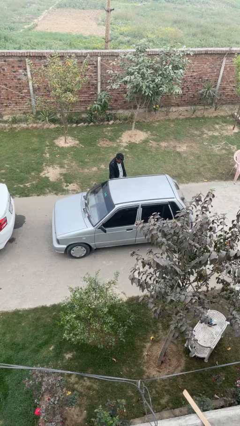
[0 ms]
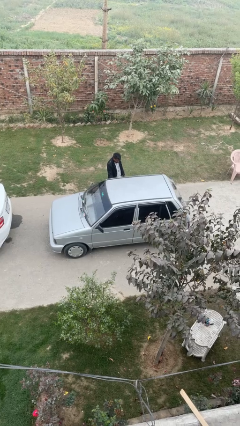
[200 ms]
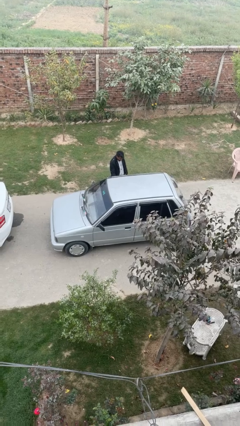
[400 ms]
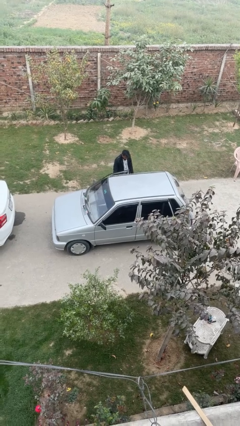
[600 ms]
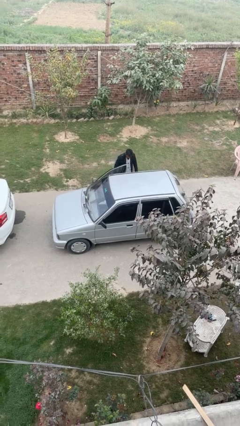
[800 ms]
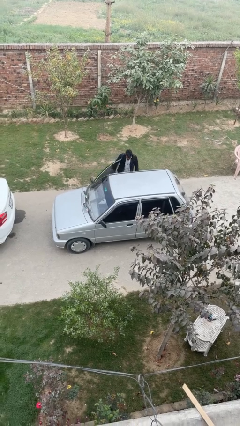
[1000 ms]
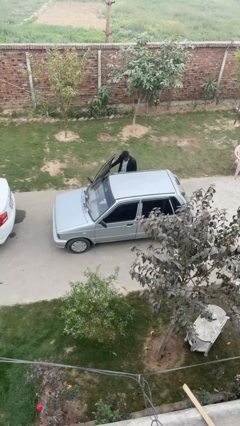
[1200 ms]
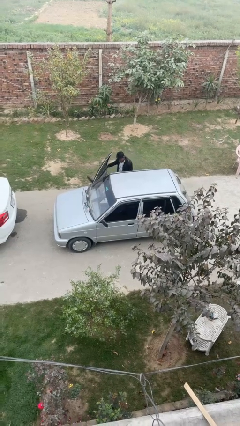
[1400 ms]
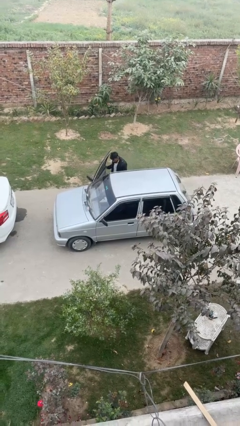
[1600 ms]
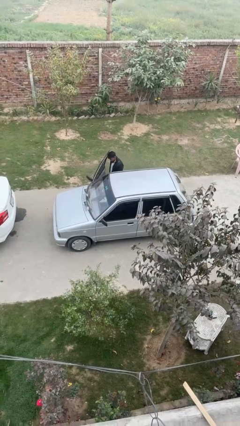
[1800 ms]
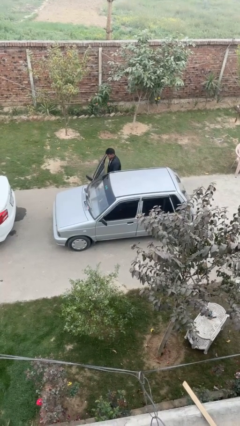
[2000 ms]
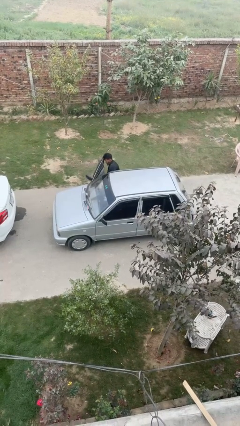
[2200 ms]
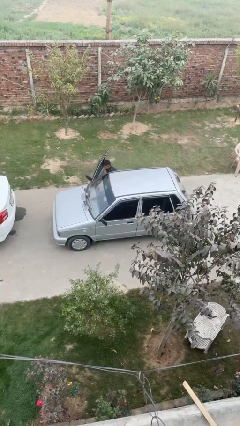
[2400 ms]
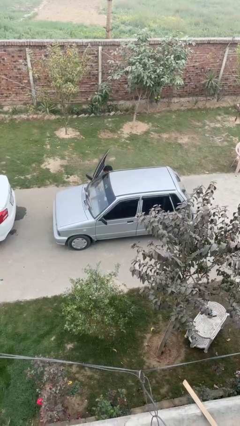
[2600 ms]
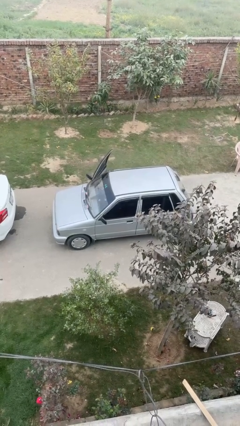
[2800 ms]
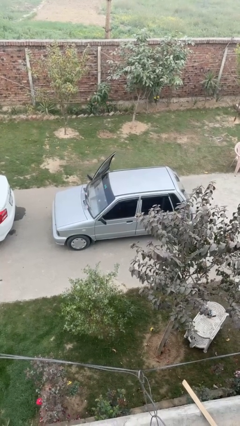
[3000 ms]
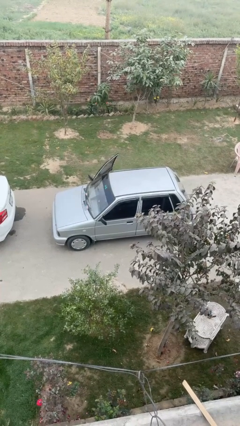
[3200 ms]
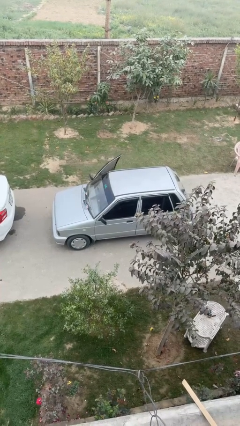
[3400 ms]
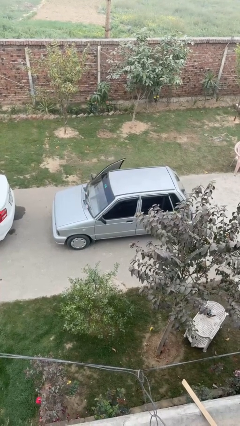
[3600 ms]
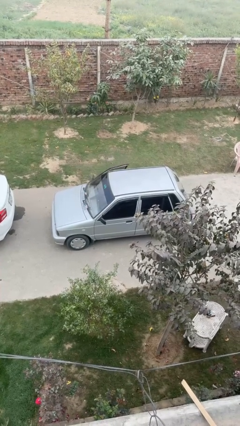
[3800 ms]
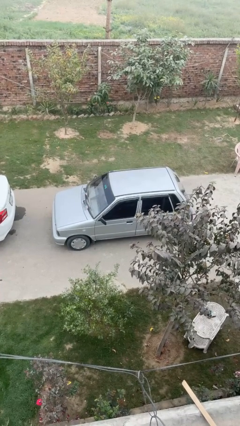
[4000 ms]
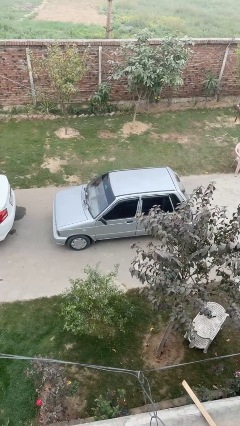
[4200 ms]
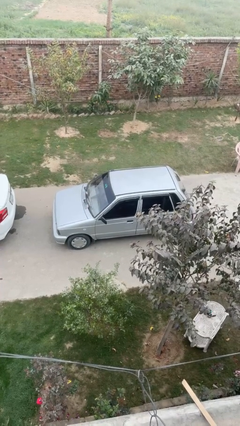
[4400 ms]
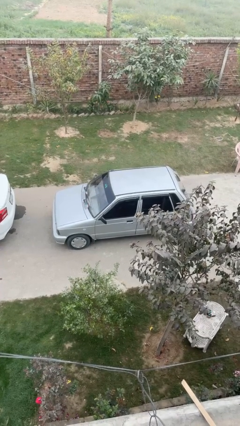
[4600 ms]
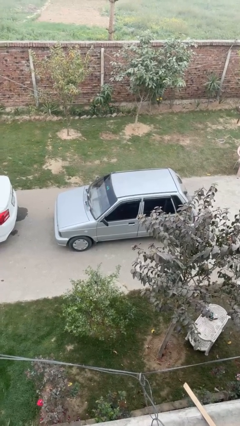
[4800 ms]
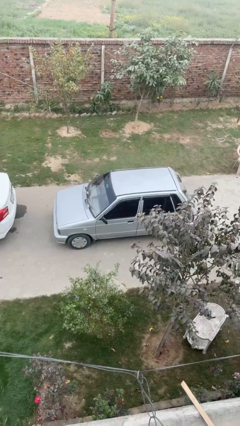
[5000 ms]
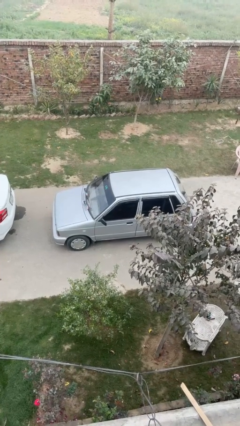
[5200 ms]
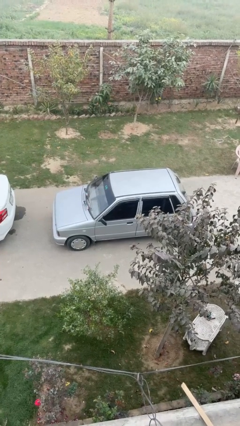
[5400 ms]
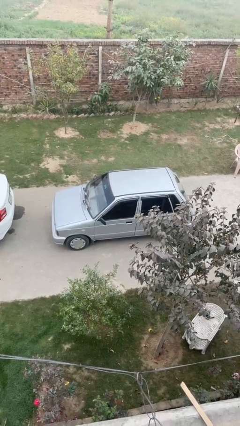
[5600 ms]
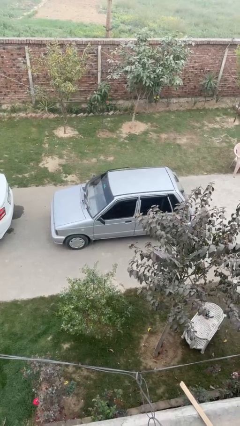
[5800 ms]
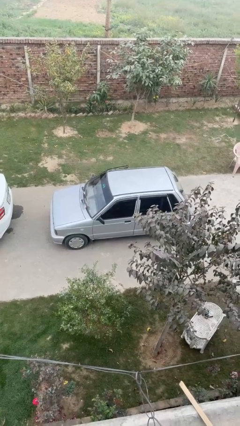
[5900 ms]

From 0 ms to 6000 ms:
car picks up person

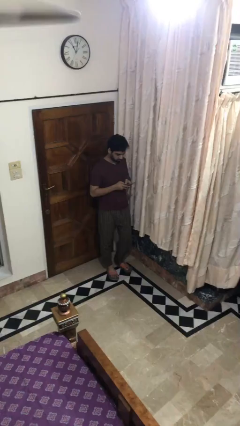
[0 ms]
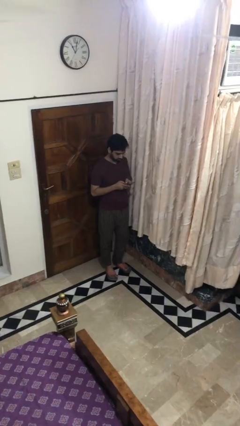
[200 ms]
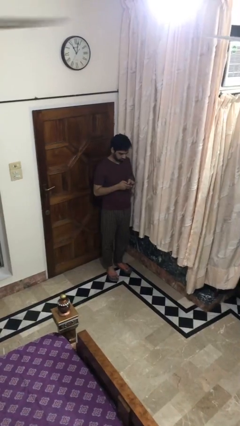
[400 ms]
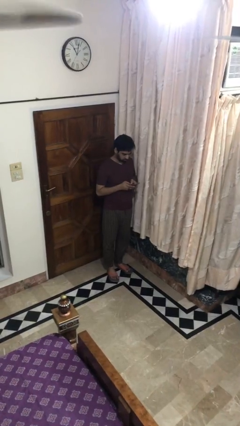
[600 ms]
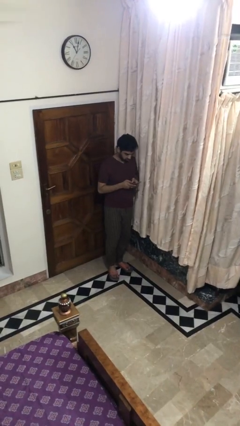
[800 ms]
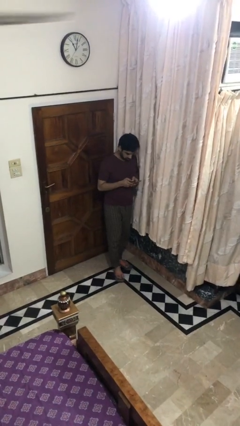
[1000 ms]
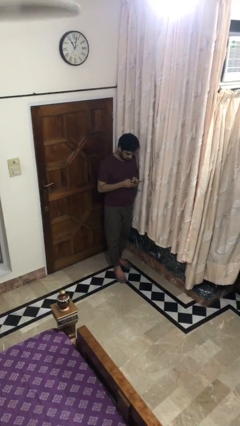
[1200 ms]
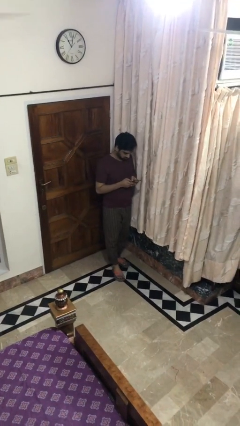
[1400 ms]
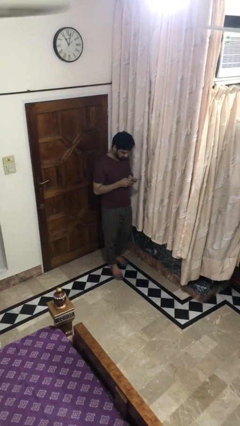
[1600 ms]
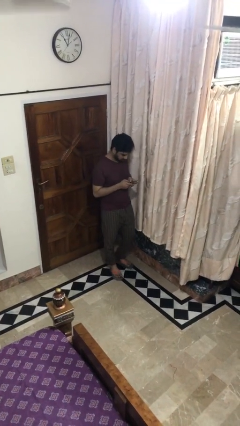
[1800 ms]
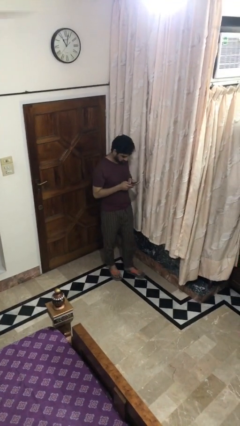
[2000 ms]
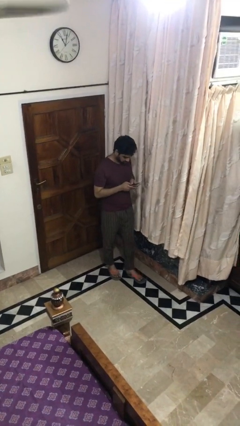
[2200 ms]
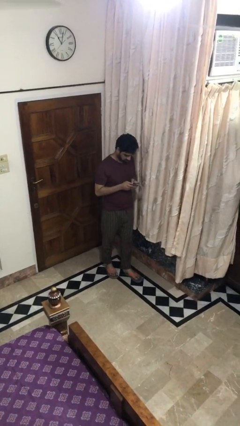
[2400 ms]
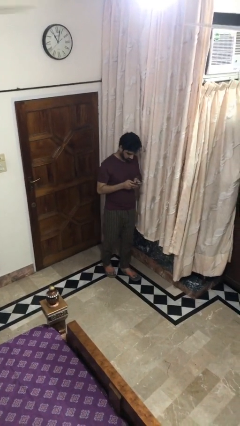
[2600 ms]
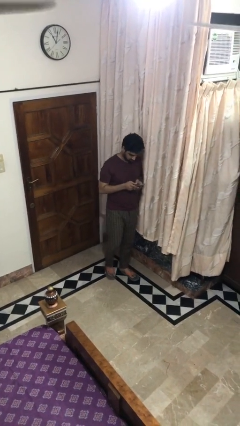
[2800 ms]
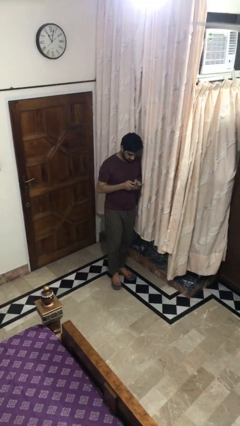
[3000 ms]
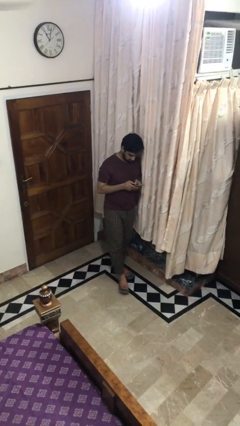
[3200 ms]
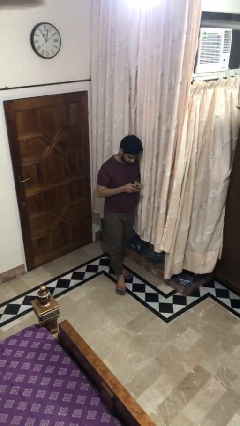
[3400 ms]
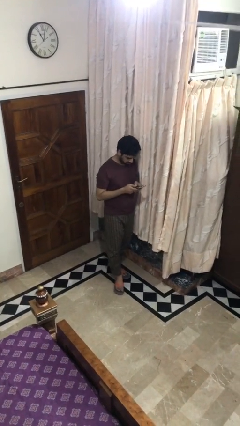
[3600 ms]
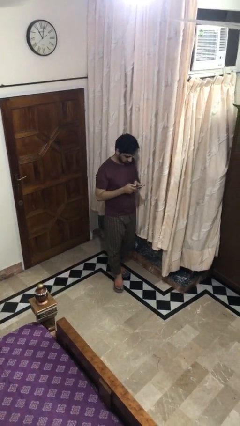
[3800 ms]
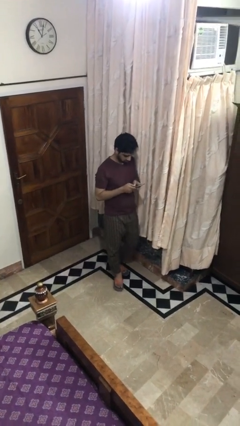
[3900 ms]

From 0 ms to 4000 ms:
person texts on phone

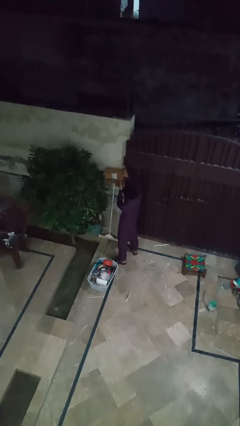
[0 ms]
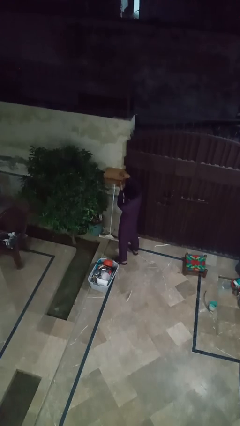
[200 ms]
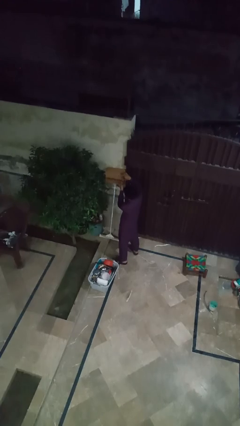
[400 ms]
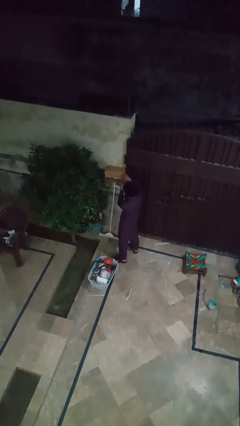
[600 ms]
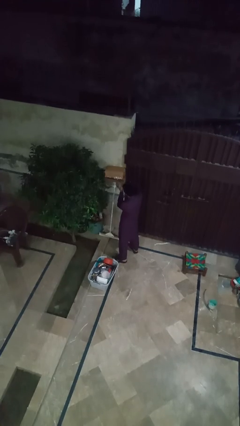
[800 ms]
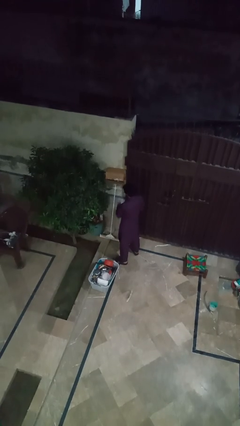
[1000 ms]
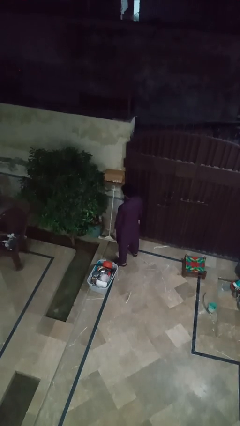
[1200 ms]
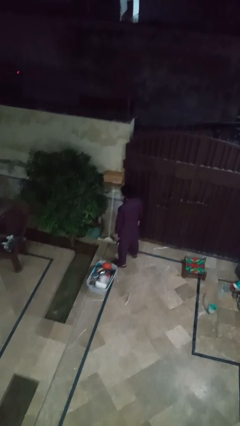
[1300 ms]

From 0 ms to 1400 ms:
person closes mailbox

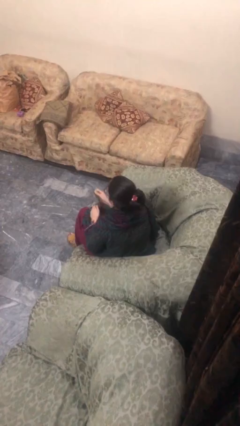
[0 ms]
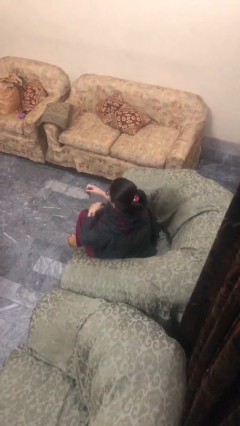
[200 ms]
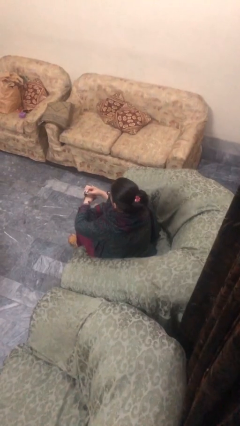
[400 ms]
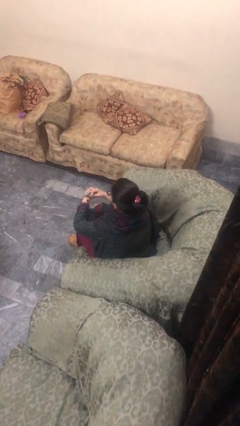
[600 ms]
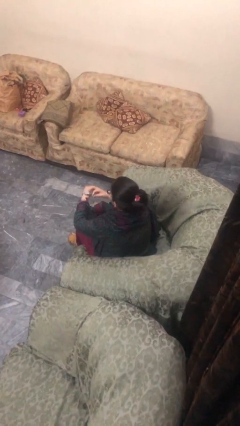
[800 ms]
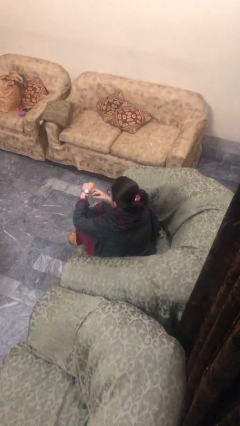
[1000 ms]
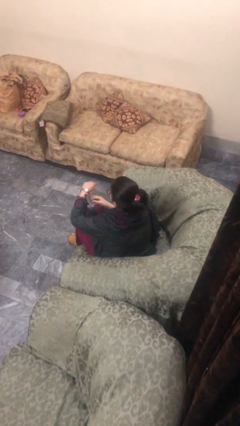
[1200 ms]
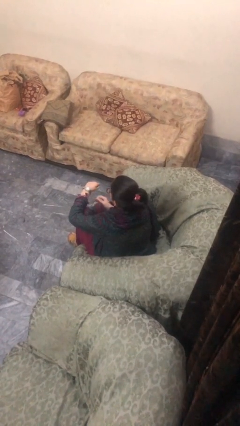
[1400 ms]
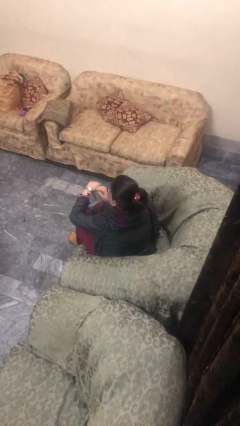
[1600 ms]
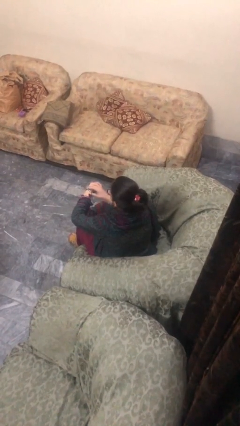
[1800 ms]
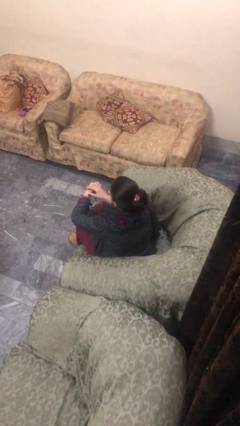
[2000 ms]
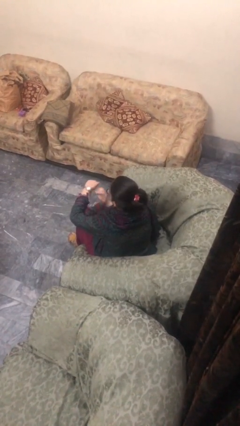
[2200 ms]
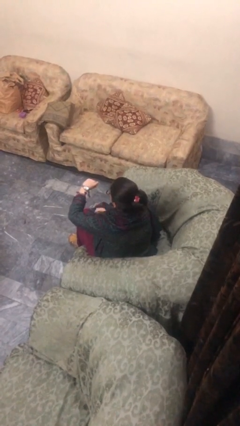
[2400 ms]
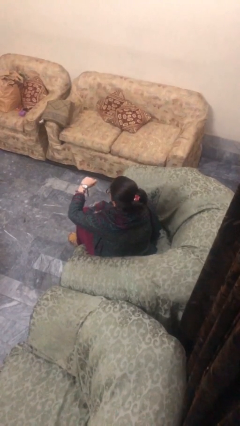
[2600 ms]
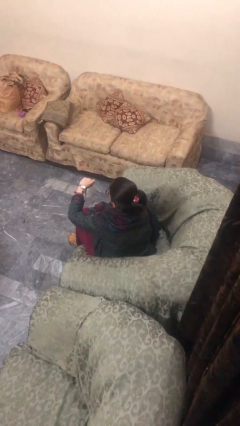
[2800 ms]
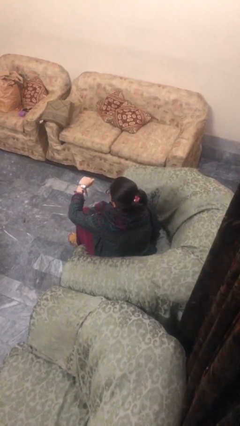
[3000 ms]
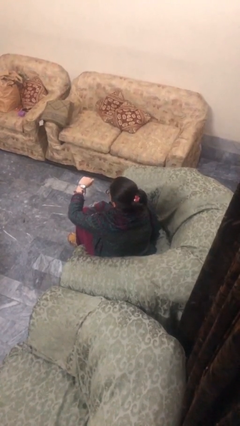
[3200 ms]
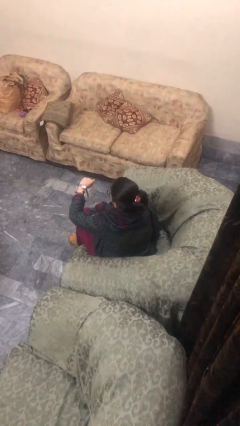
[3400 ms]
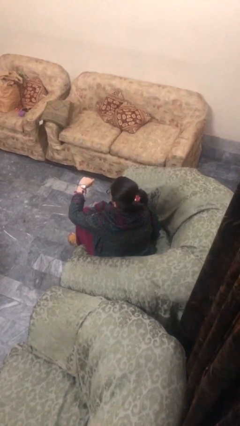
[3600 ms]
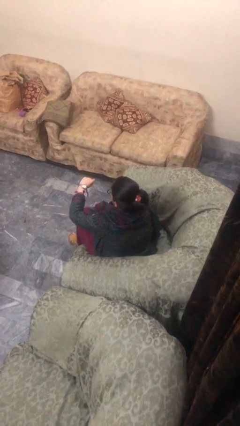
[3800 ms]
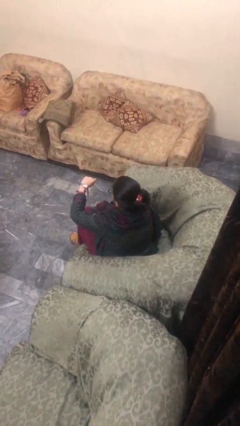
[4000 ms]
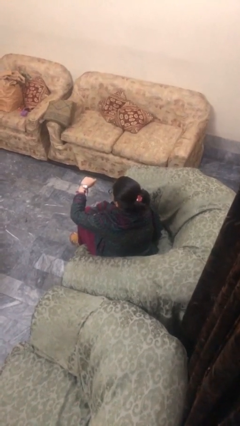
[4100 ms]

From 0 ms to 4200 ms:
person puts on wristwatch

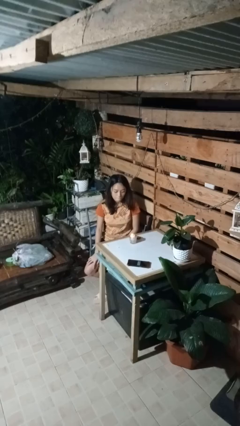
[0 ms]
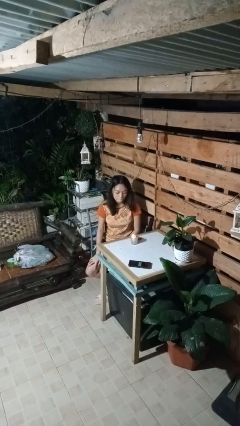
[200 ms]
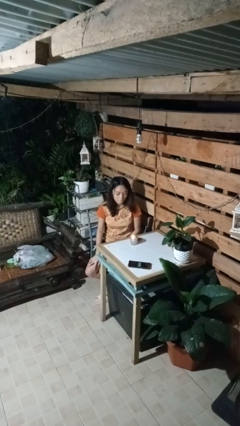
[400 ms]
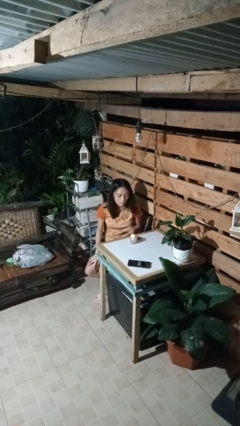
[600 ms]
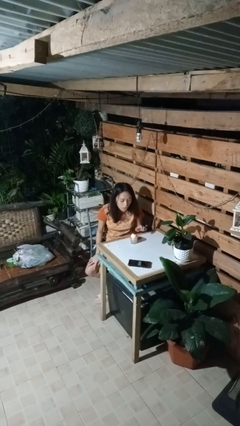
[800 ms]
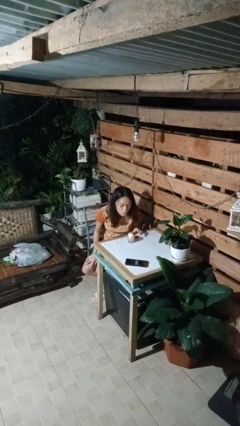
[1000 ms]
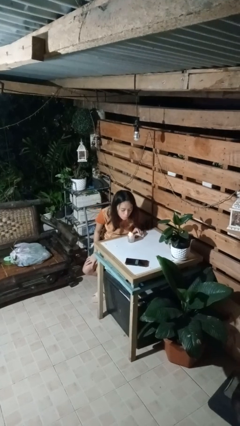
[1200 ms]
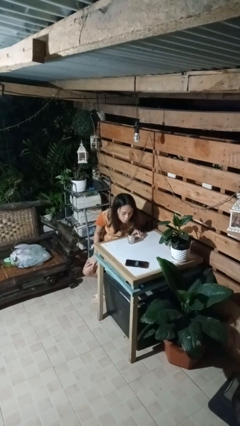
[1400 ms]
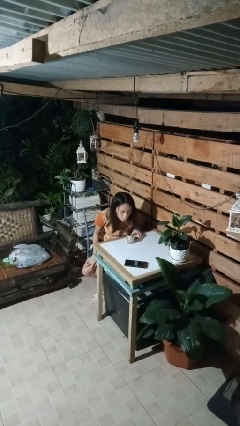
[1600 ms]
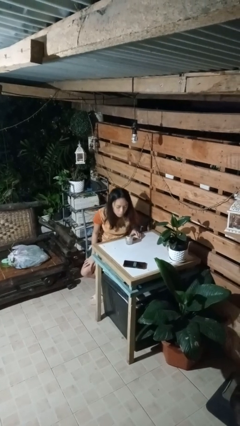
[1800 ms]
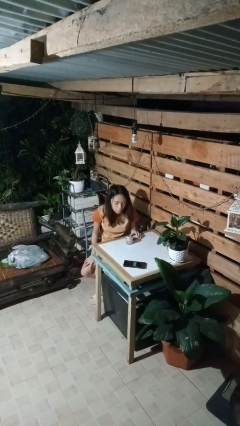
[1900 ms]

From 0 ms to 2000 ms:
person extinguishes candle
